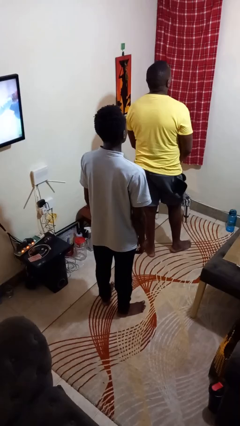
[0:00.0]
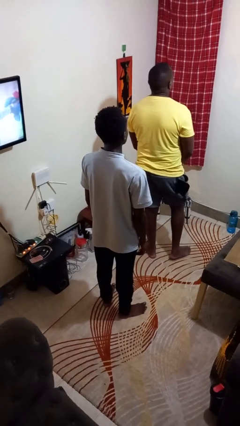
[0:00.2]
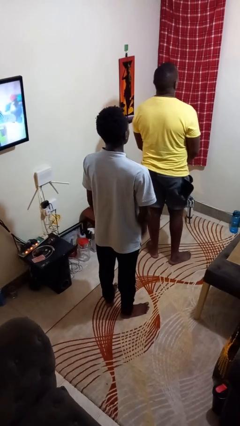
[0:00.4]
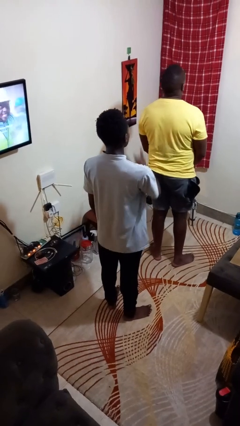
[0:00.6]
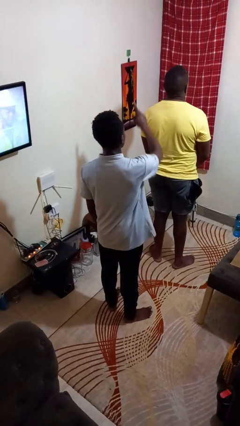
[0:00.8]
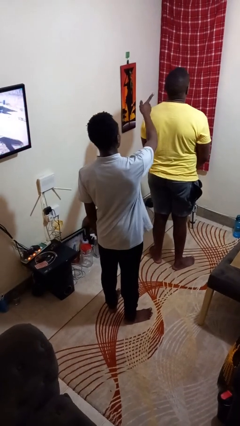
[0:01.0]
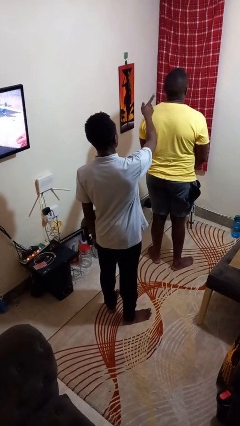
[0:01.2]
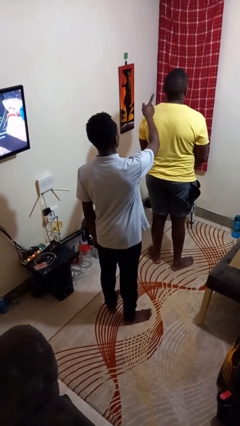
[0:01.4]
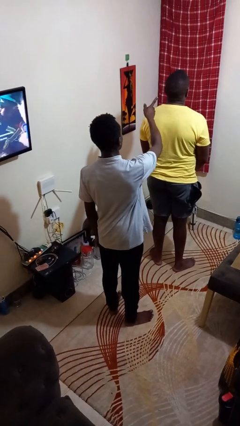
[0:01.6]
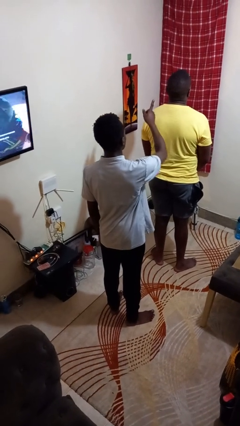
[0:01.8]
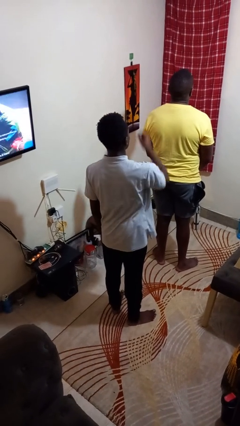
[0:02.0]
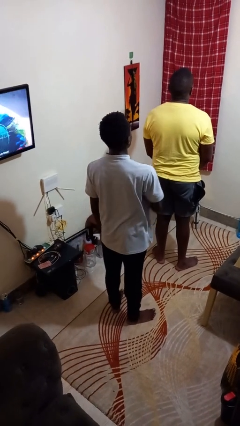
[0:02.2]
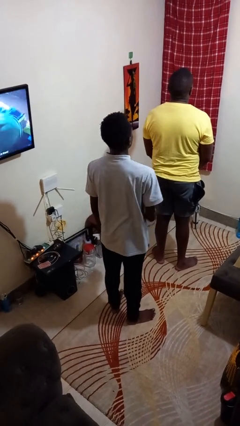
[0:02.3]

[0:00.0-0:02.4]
person points at person

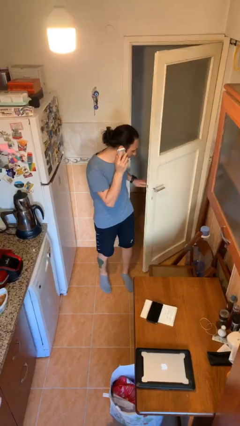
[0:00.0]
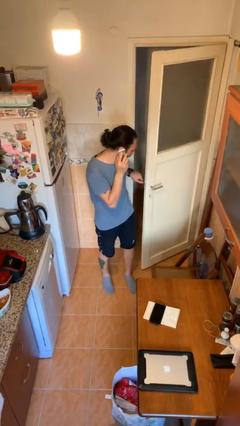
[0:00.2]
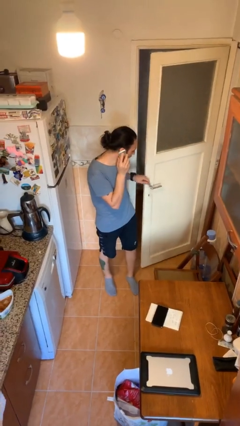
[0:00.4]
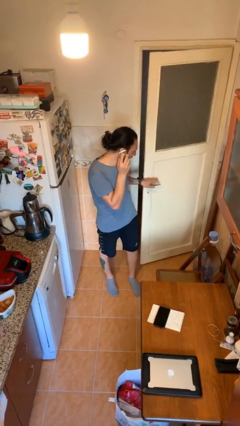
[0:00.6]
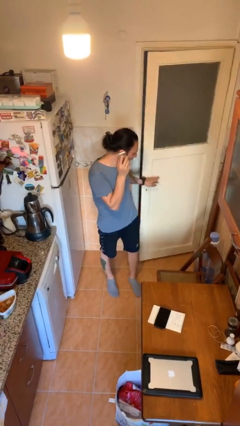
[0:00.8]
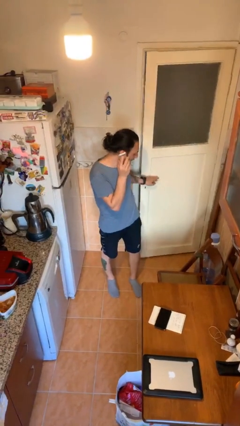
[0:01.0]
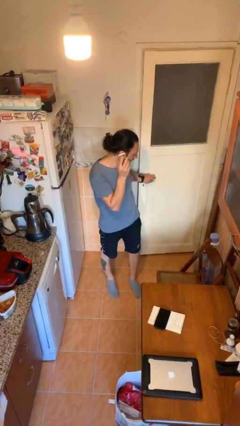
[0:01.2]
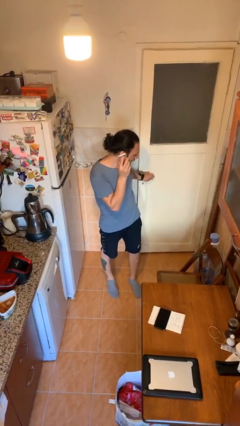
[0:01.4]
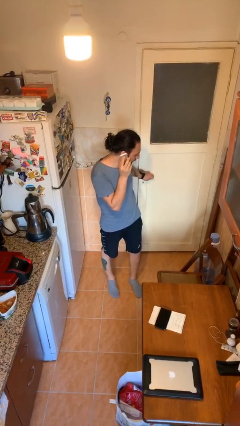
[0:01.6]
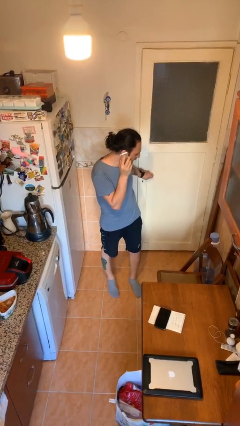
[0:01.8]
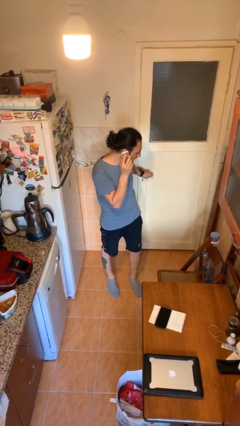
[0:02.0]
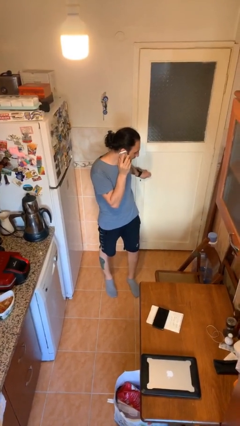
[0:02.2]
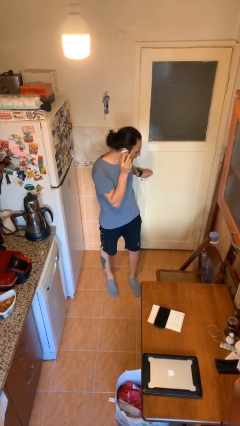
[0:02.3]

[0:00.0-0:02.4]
person closes facility door

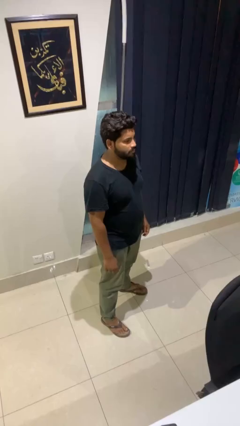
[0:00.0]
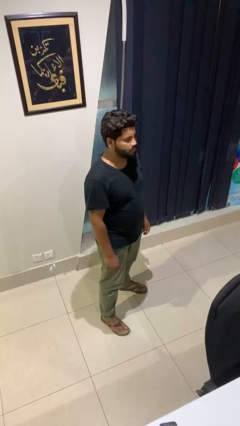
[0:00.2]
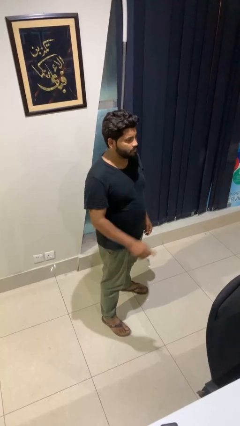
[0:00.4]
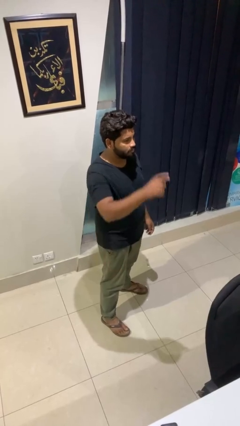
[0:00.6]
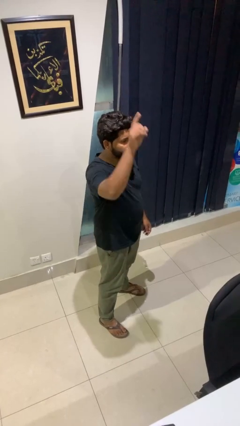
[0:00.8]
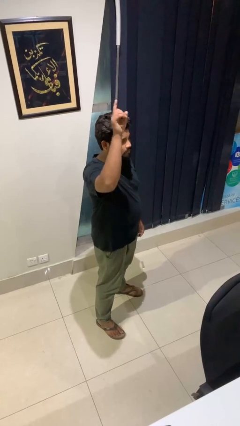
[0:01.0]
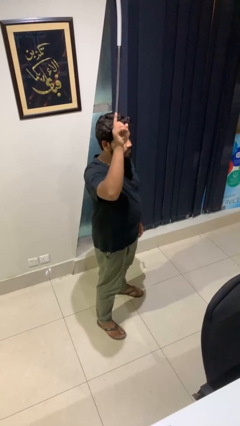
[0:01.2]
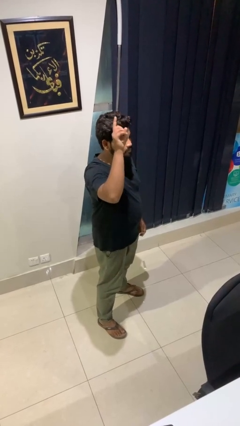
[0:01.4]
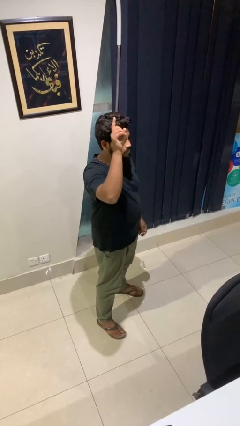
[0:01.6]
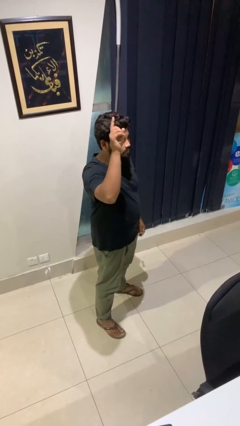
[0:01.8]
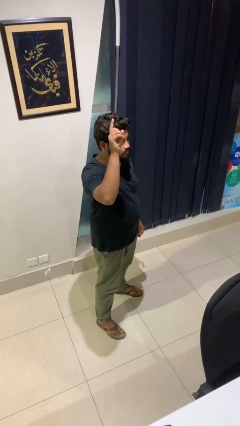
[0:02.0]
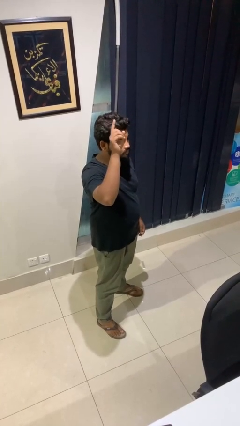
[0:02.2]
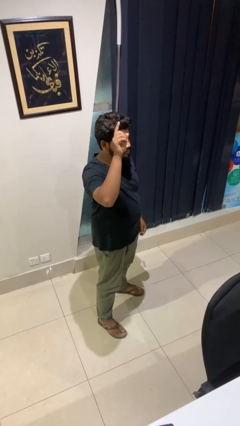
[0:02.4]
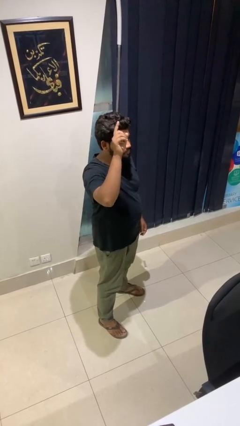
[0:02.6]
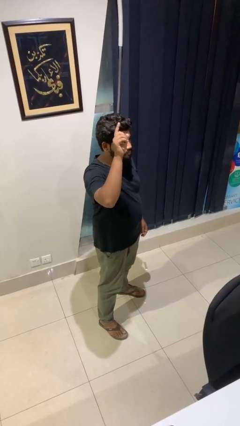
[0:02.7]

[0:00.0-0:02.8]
person gestures raise hand

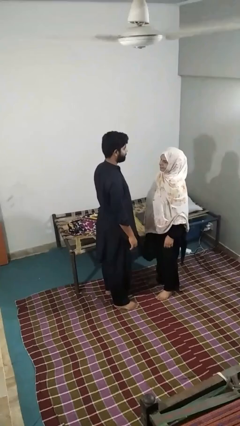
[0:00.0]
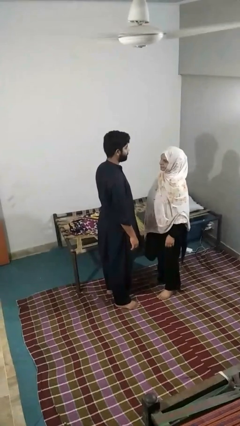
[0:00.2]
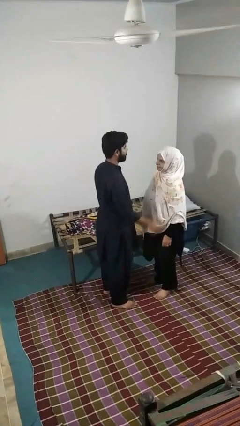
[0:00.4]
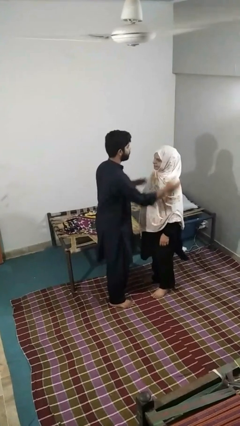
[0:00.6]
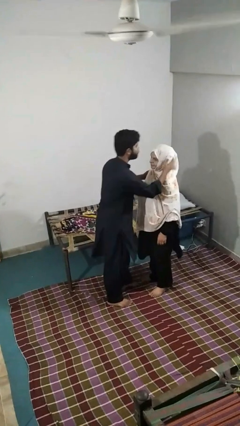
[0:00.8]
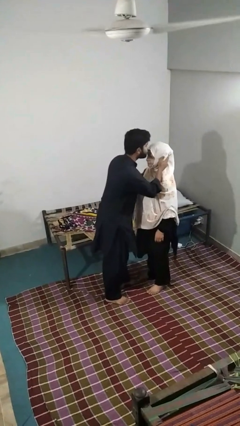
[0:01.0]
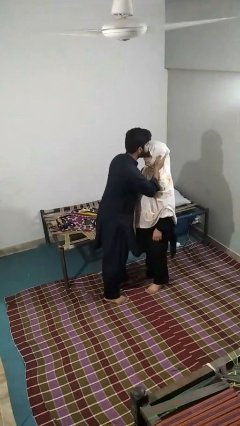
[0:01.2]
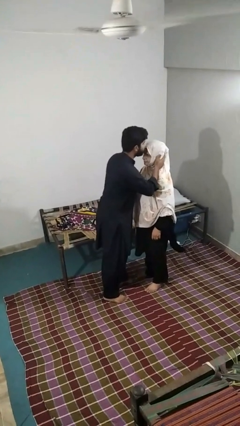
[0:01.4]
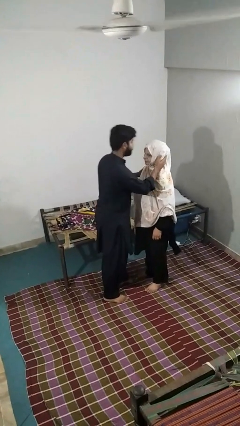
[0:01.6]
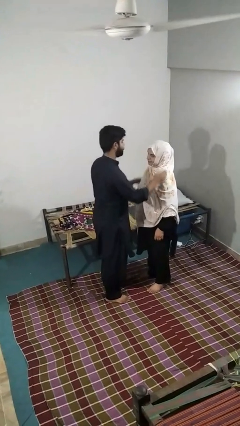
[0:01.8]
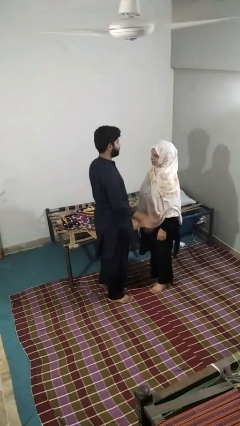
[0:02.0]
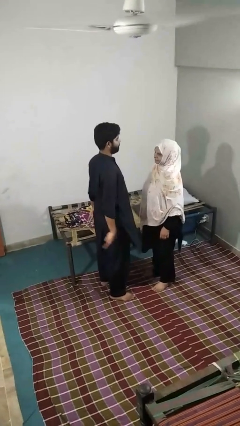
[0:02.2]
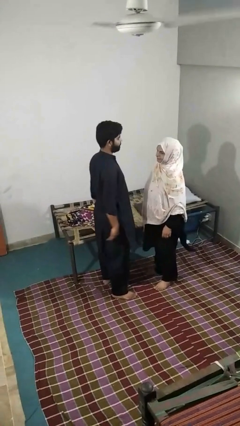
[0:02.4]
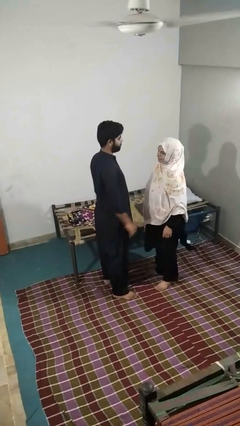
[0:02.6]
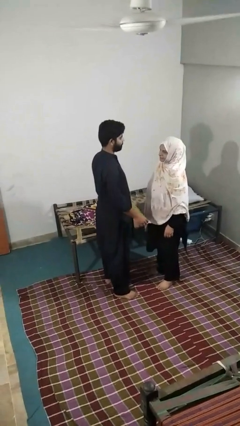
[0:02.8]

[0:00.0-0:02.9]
person kisses cheek of person

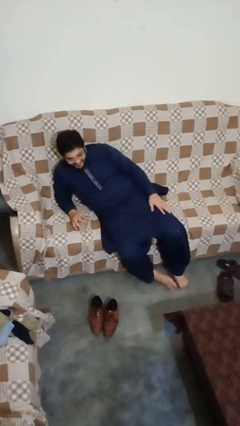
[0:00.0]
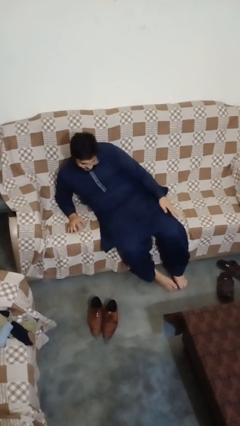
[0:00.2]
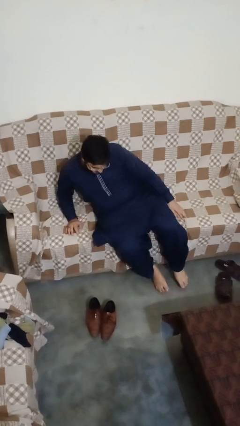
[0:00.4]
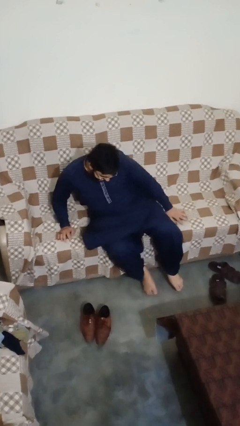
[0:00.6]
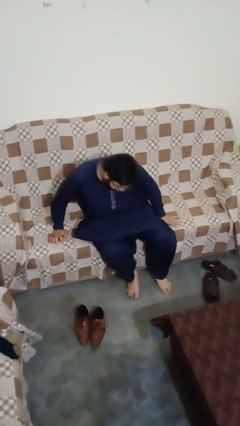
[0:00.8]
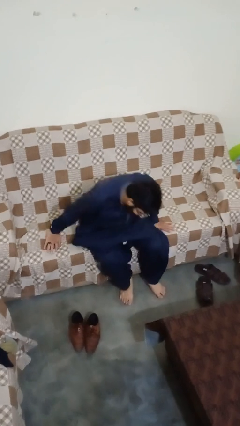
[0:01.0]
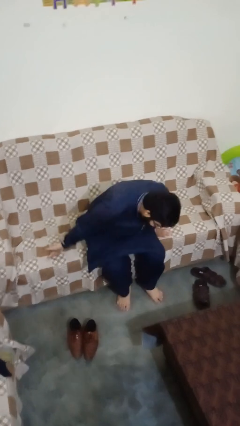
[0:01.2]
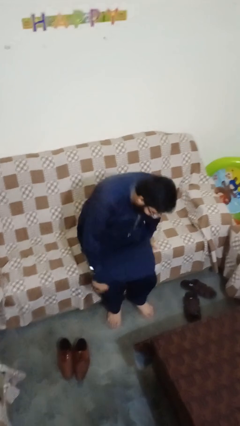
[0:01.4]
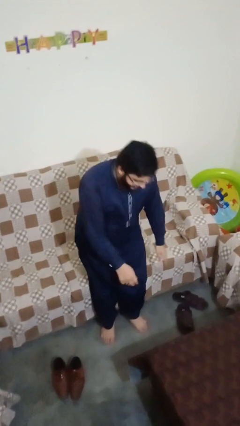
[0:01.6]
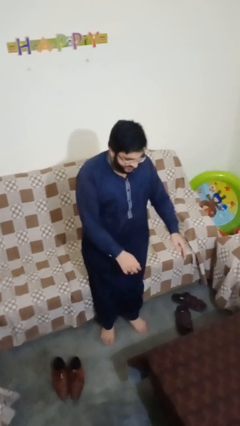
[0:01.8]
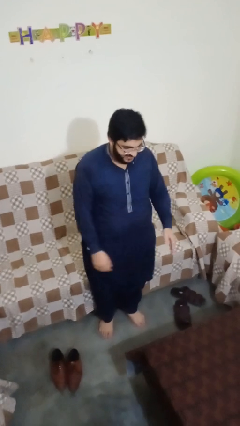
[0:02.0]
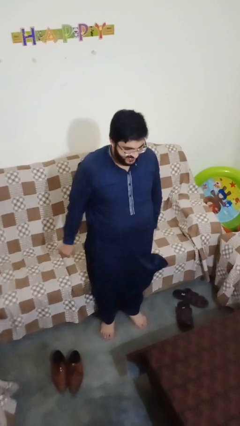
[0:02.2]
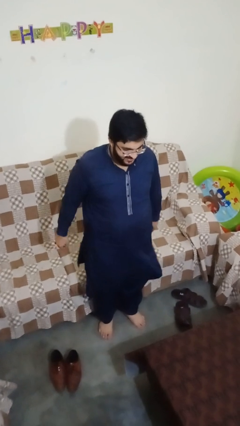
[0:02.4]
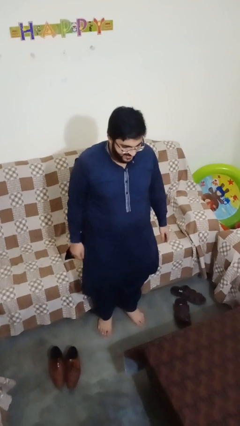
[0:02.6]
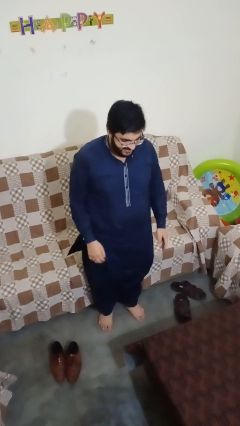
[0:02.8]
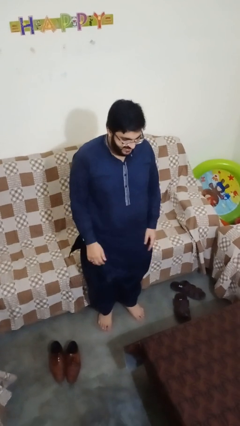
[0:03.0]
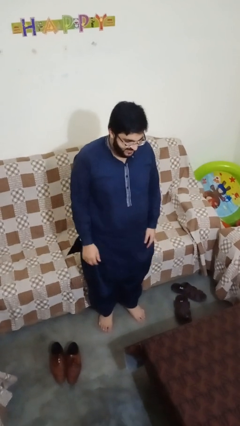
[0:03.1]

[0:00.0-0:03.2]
person stands up

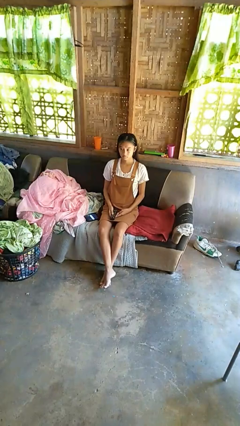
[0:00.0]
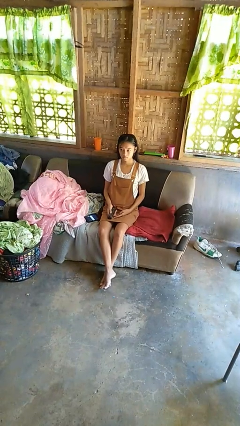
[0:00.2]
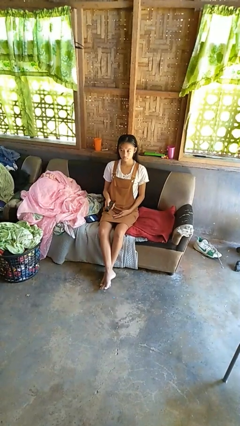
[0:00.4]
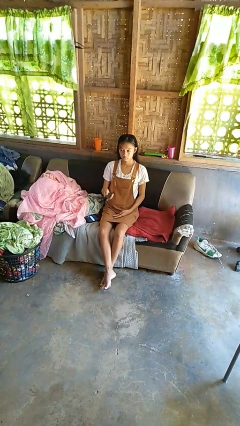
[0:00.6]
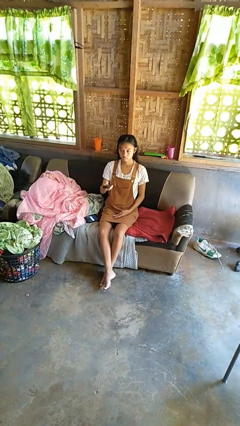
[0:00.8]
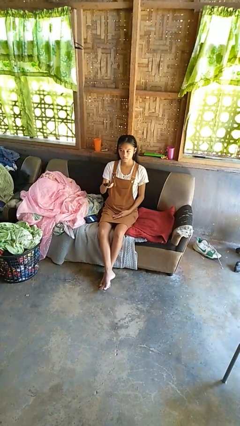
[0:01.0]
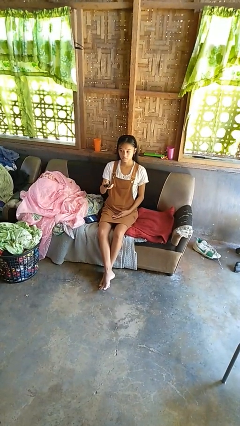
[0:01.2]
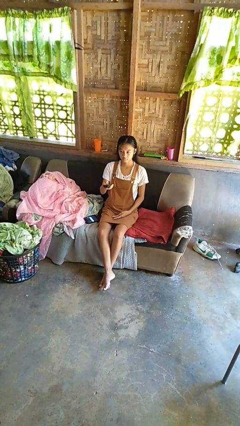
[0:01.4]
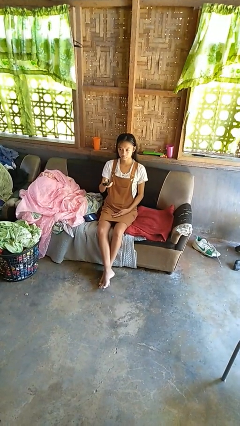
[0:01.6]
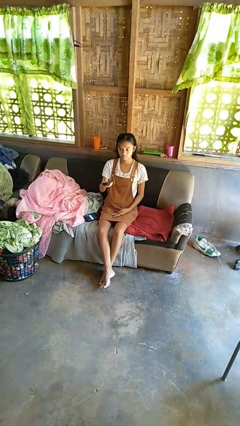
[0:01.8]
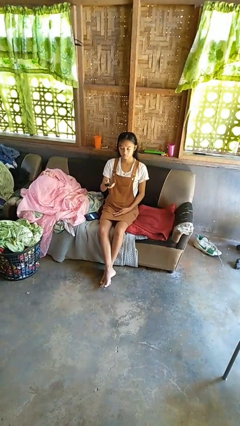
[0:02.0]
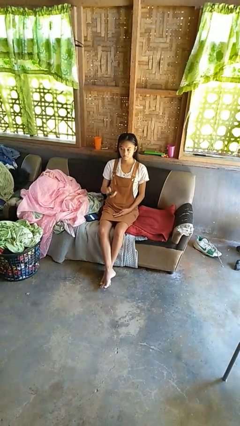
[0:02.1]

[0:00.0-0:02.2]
person uses television remote

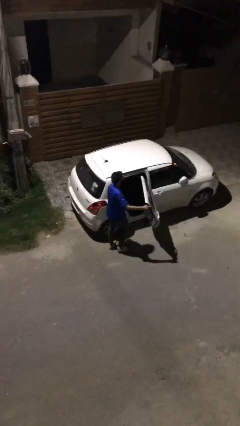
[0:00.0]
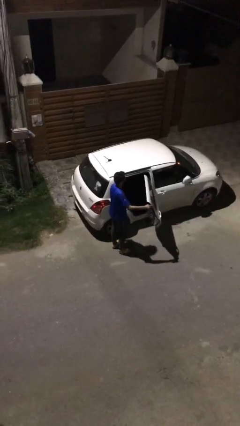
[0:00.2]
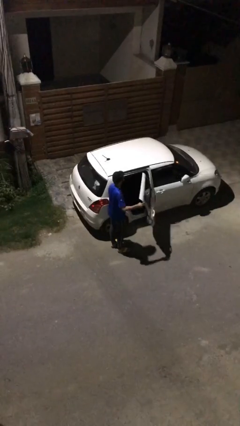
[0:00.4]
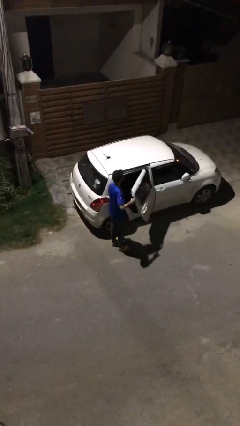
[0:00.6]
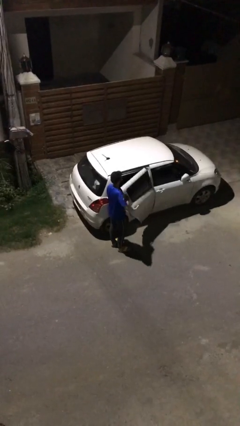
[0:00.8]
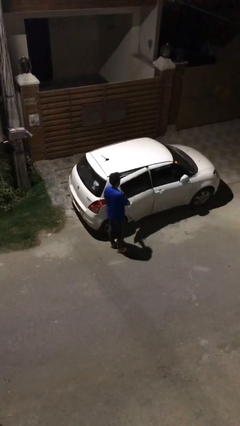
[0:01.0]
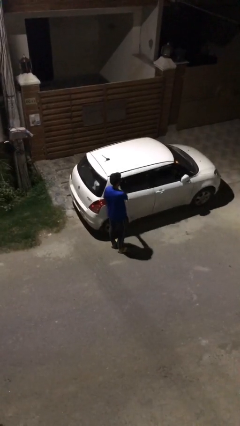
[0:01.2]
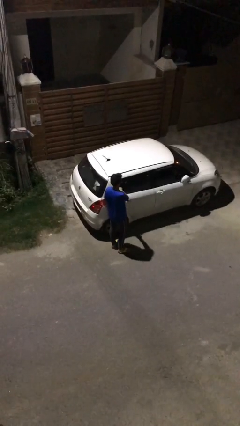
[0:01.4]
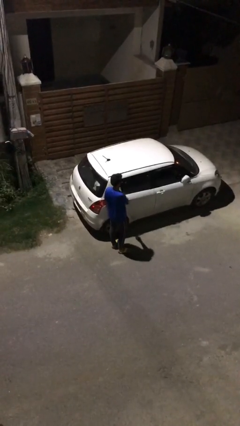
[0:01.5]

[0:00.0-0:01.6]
person closes car door
